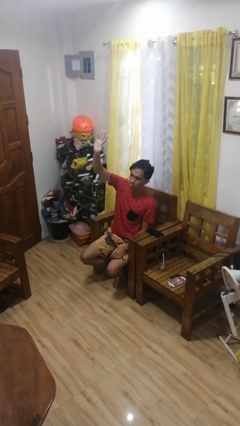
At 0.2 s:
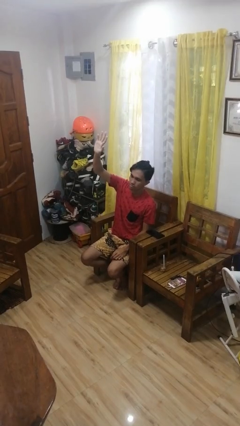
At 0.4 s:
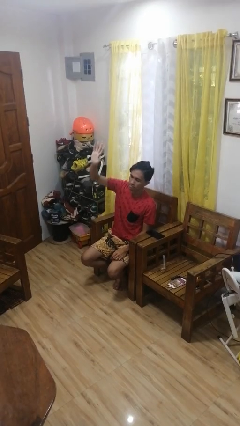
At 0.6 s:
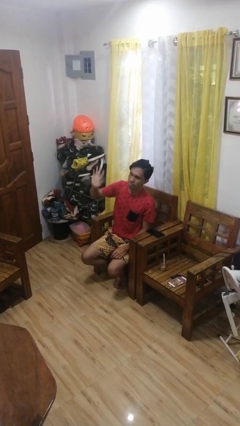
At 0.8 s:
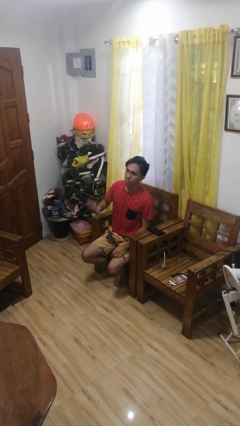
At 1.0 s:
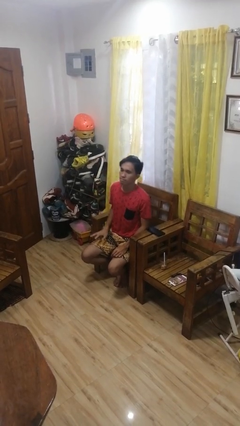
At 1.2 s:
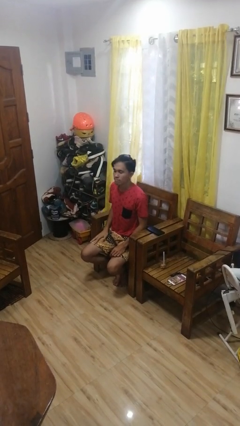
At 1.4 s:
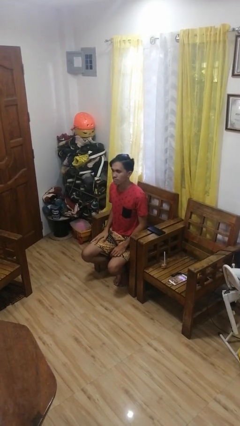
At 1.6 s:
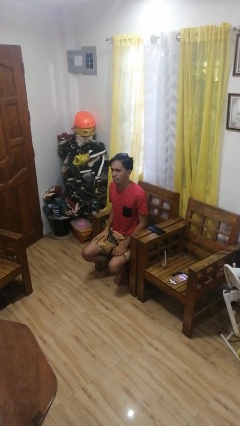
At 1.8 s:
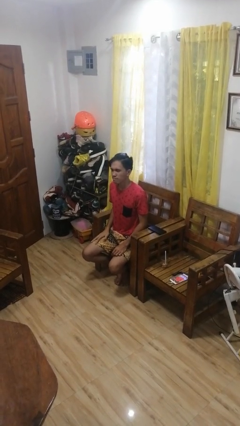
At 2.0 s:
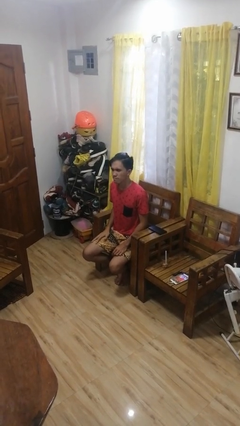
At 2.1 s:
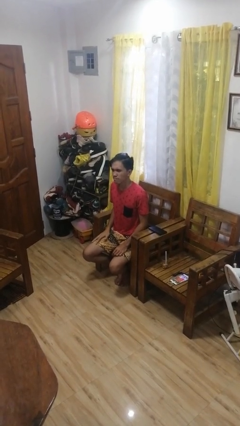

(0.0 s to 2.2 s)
person gestures lower hand

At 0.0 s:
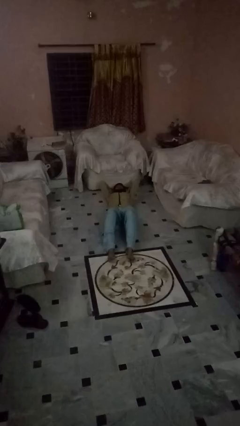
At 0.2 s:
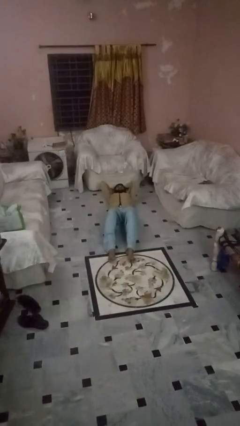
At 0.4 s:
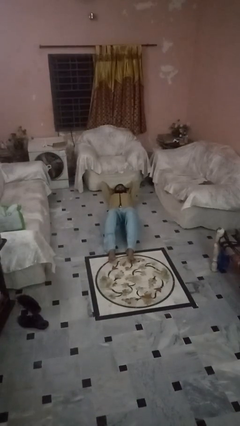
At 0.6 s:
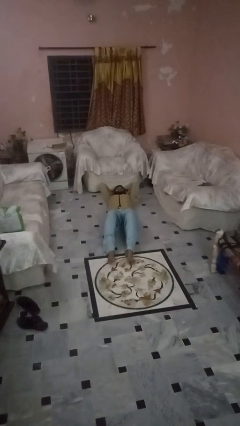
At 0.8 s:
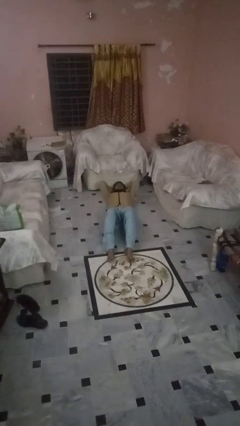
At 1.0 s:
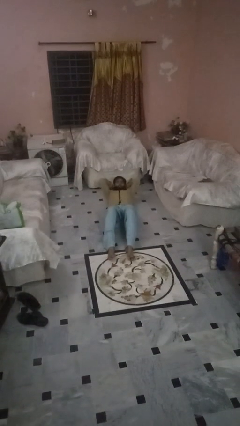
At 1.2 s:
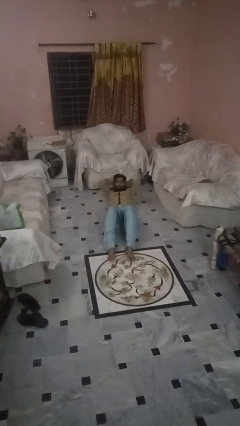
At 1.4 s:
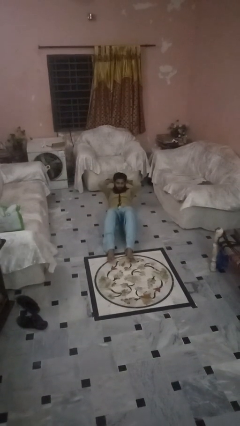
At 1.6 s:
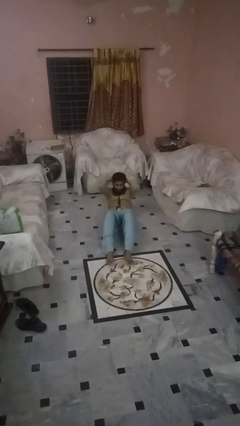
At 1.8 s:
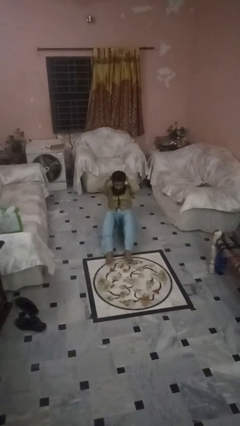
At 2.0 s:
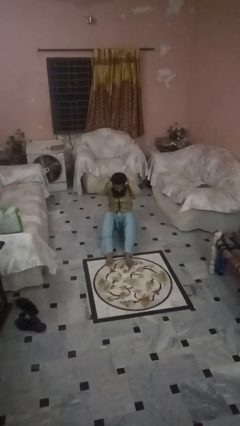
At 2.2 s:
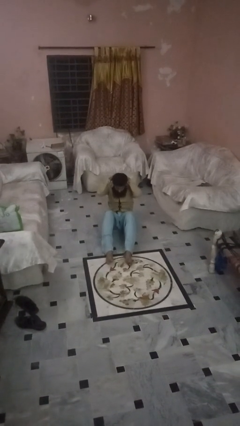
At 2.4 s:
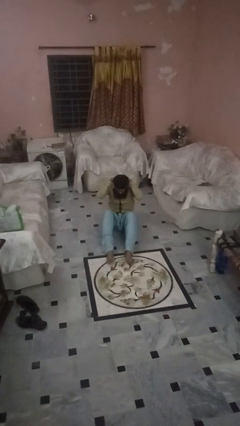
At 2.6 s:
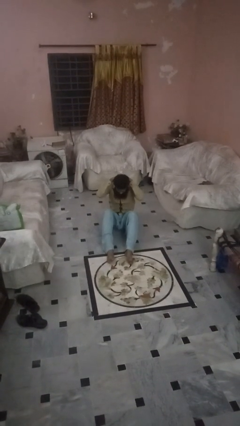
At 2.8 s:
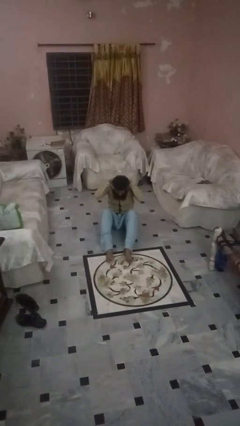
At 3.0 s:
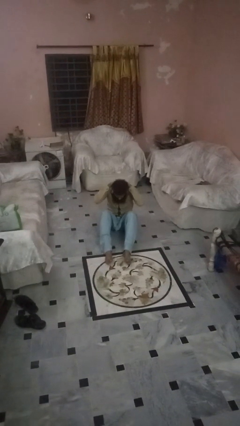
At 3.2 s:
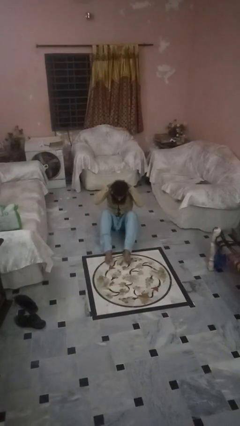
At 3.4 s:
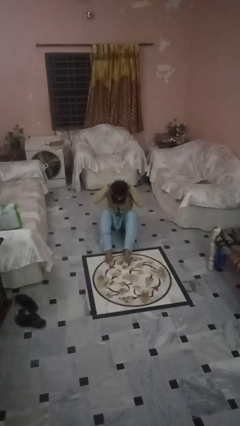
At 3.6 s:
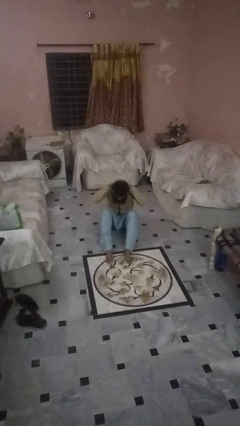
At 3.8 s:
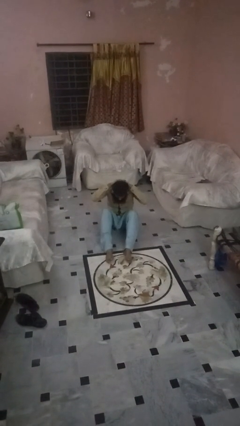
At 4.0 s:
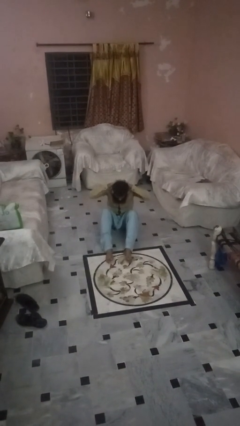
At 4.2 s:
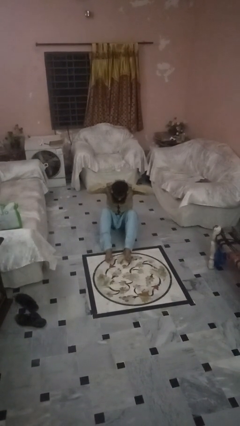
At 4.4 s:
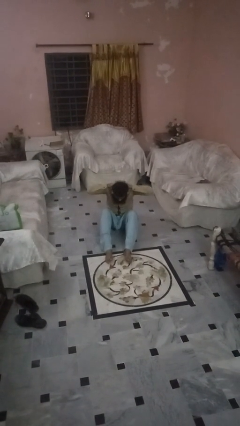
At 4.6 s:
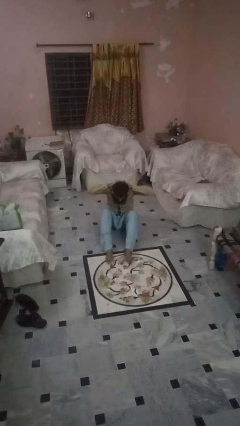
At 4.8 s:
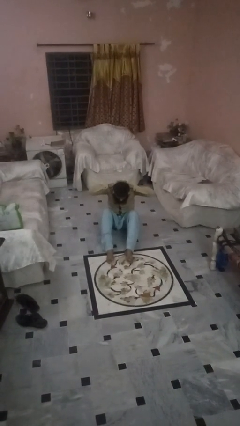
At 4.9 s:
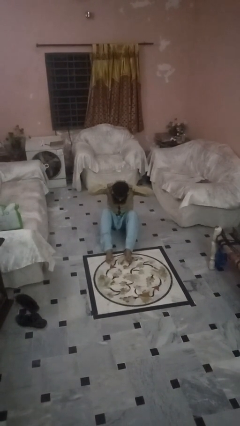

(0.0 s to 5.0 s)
person exercises with situp

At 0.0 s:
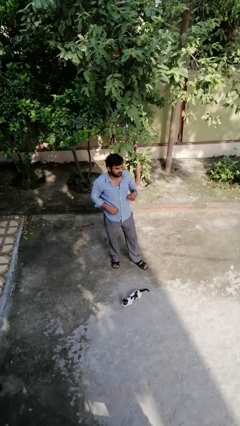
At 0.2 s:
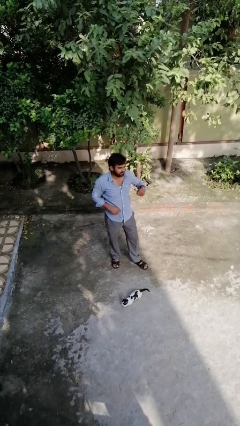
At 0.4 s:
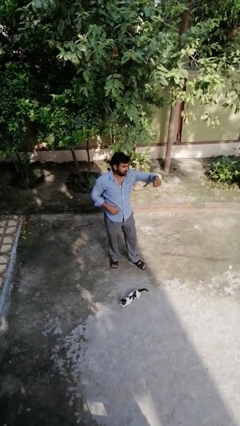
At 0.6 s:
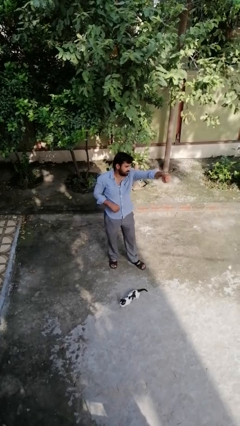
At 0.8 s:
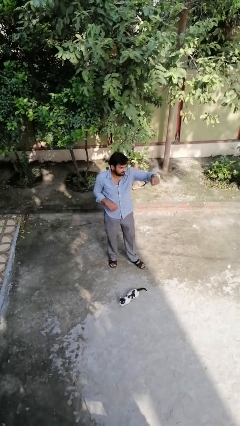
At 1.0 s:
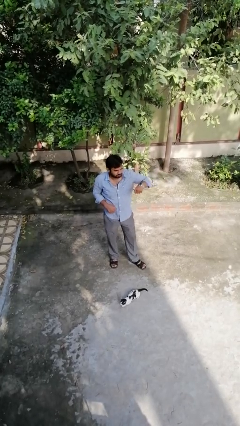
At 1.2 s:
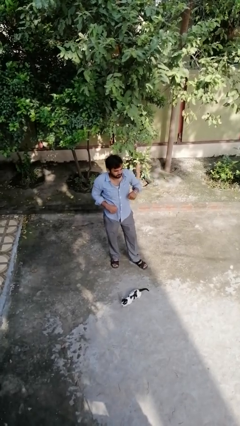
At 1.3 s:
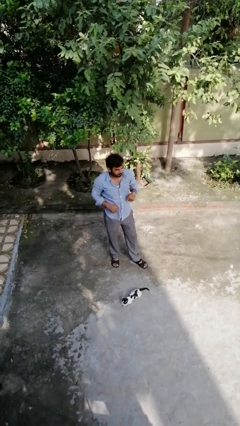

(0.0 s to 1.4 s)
person punches

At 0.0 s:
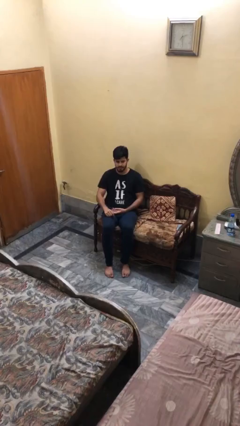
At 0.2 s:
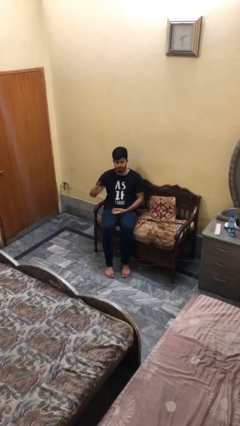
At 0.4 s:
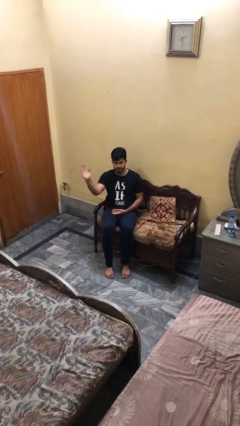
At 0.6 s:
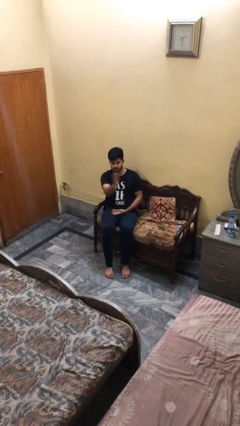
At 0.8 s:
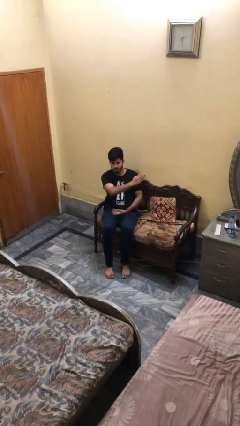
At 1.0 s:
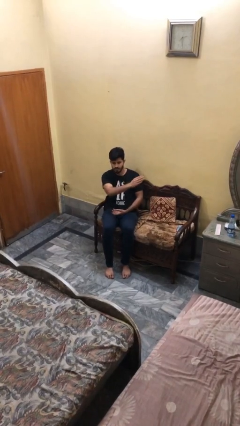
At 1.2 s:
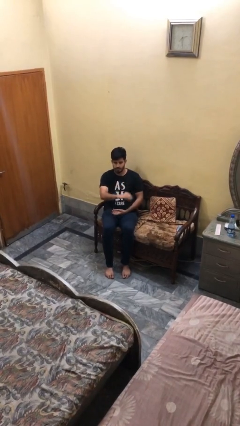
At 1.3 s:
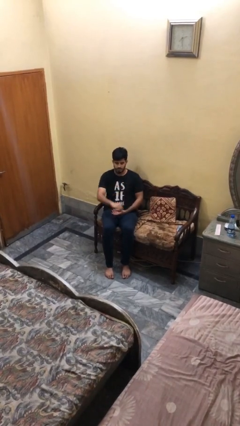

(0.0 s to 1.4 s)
person gestures swipe left

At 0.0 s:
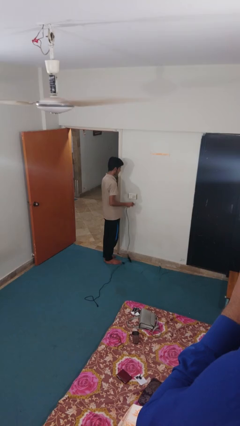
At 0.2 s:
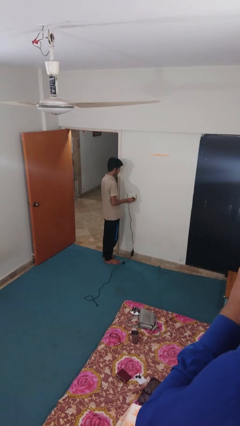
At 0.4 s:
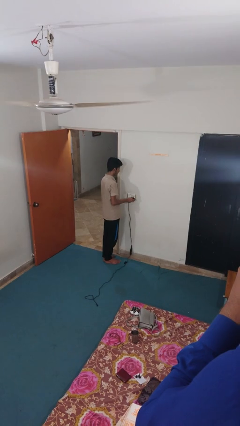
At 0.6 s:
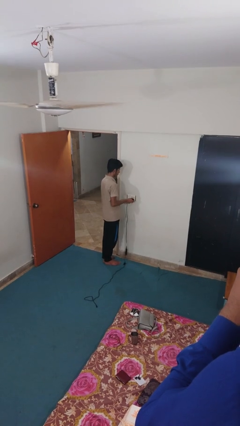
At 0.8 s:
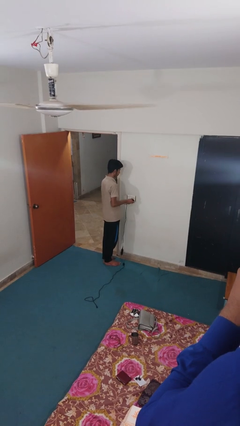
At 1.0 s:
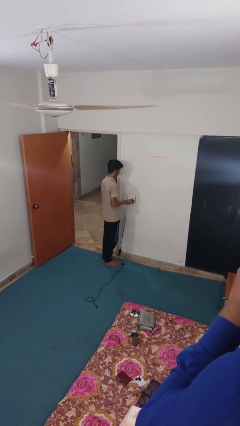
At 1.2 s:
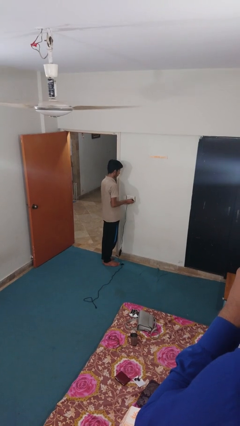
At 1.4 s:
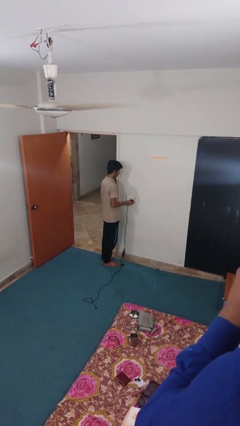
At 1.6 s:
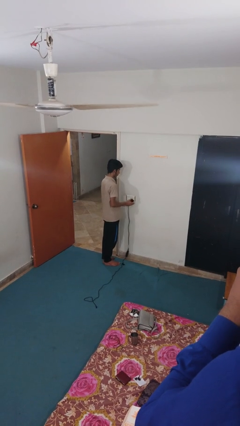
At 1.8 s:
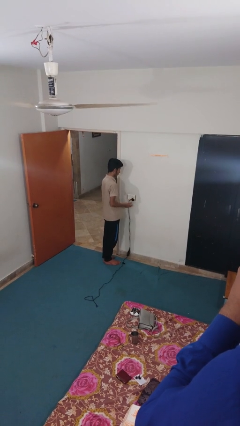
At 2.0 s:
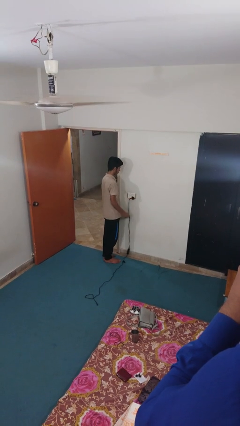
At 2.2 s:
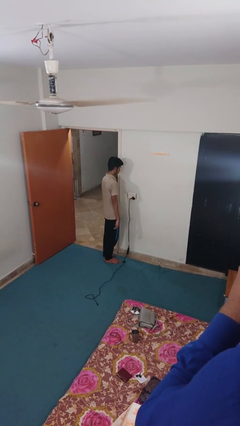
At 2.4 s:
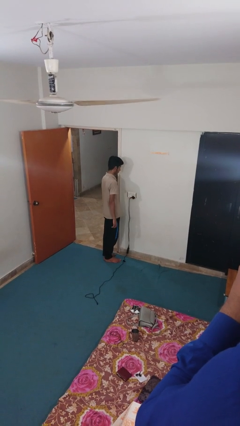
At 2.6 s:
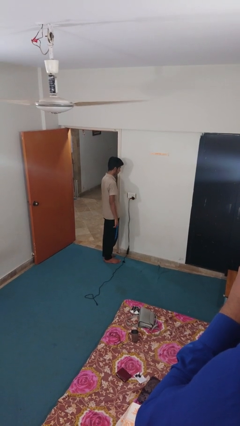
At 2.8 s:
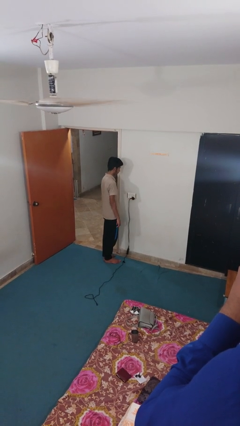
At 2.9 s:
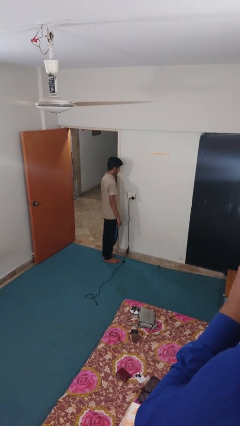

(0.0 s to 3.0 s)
person plugs into electrical socket

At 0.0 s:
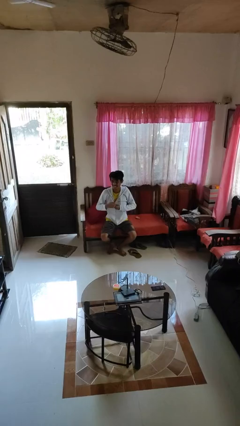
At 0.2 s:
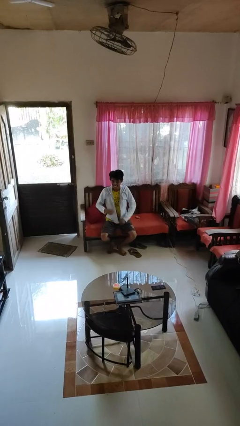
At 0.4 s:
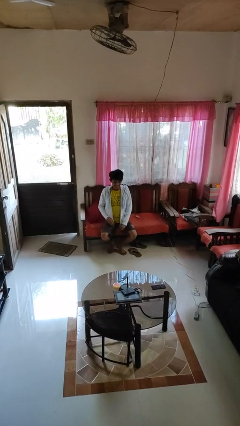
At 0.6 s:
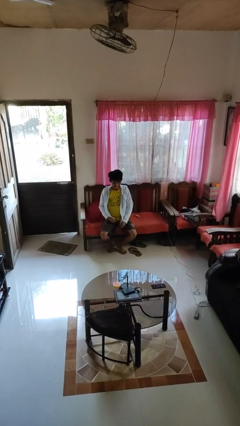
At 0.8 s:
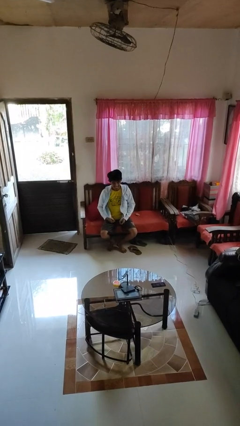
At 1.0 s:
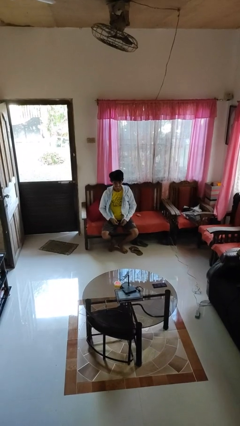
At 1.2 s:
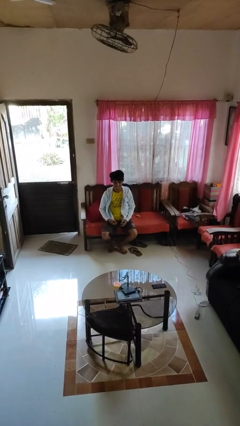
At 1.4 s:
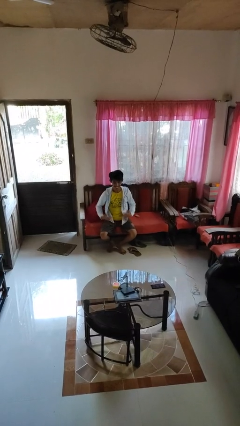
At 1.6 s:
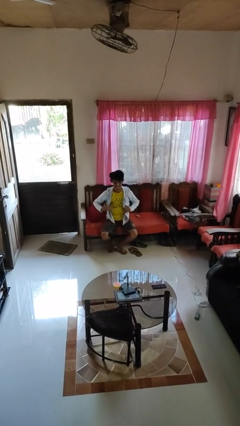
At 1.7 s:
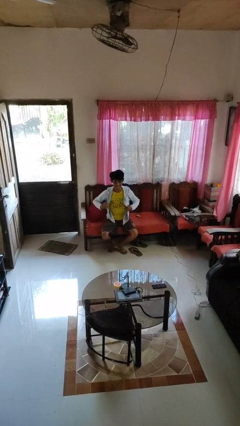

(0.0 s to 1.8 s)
person unzips jacket

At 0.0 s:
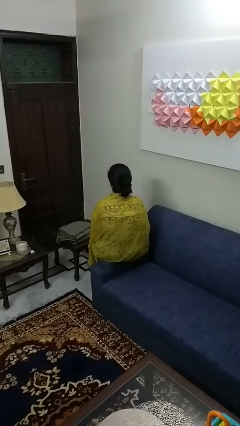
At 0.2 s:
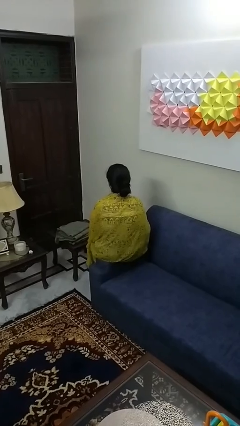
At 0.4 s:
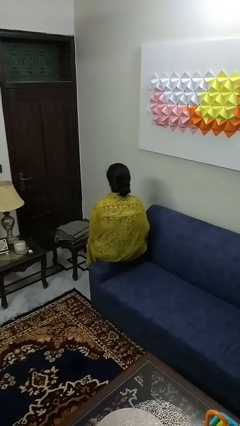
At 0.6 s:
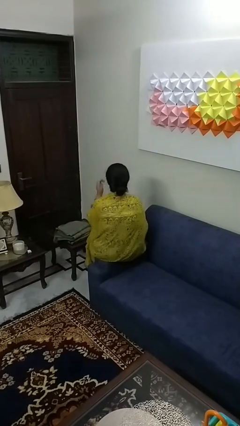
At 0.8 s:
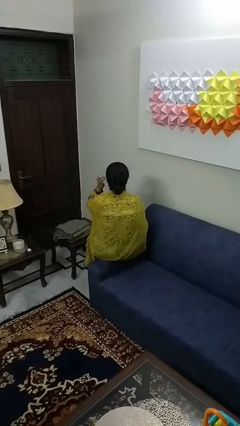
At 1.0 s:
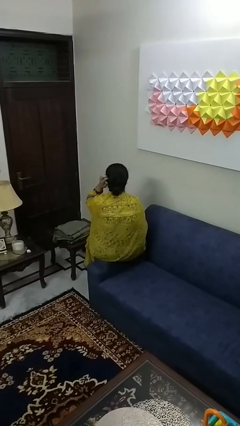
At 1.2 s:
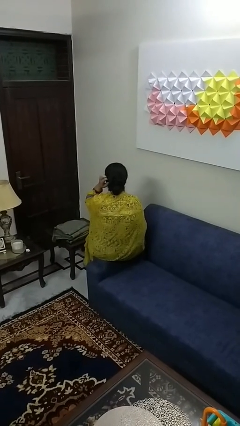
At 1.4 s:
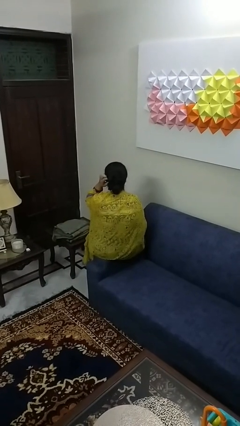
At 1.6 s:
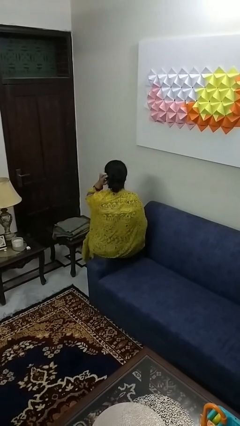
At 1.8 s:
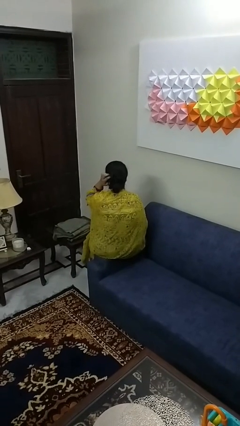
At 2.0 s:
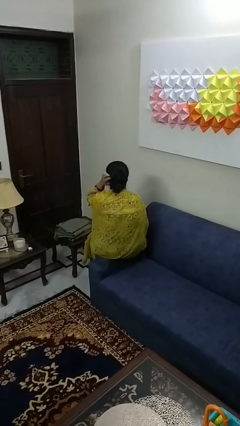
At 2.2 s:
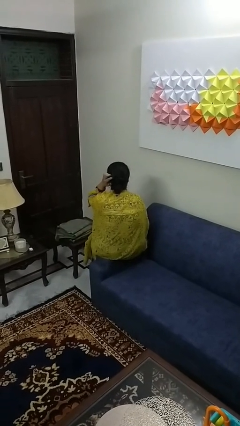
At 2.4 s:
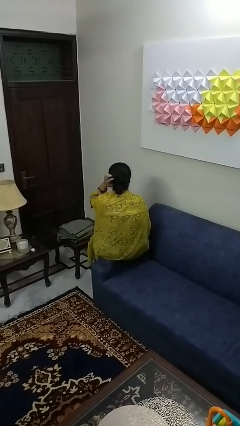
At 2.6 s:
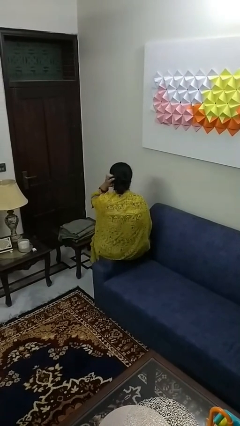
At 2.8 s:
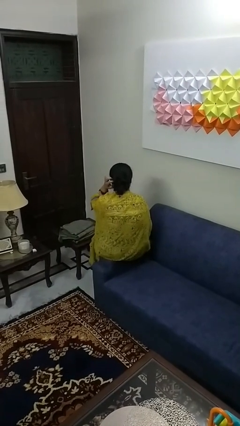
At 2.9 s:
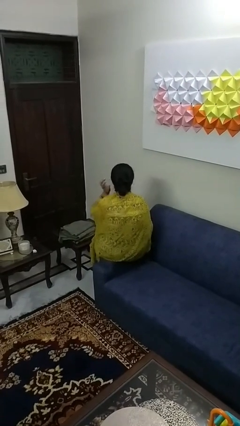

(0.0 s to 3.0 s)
person scratches face
